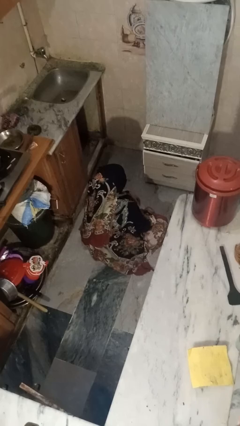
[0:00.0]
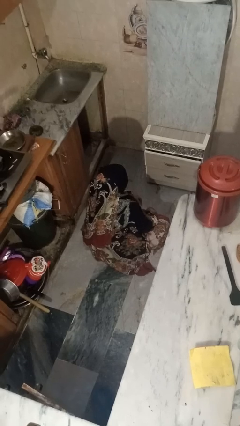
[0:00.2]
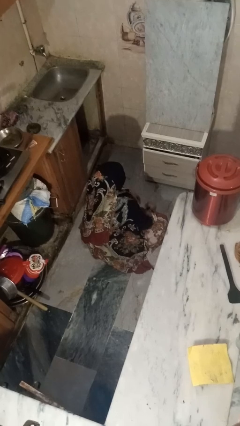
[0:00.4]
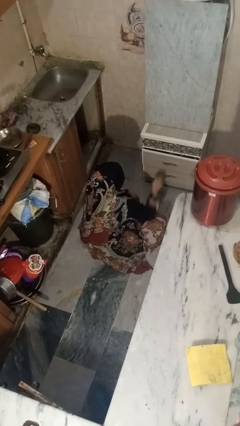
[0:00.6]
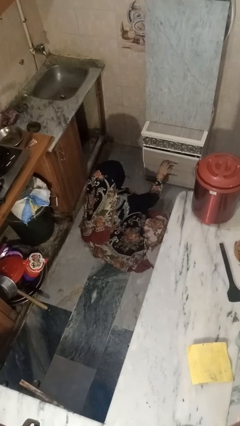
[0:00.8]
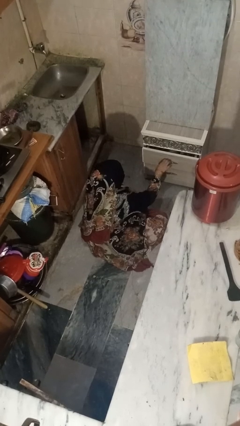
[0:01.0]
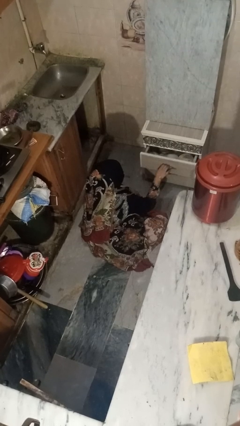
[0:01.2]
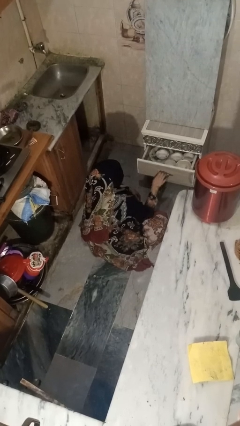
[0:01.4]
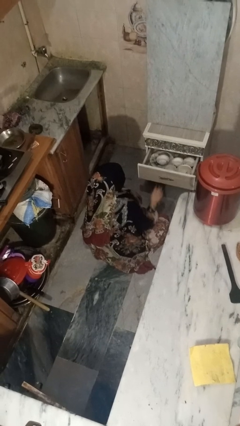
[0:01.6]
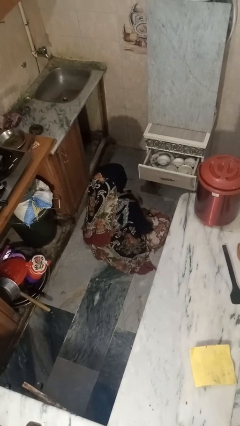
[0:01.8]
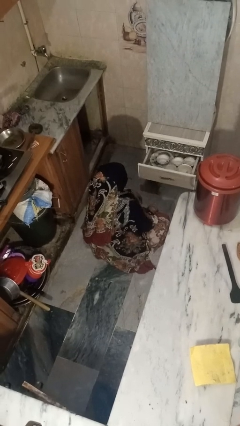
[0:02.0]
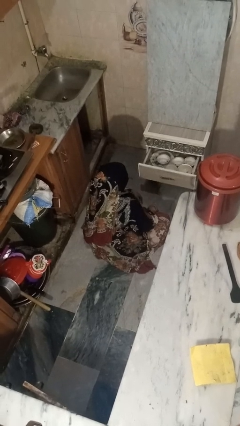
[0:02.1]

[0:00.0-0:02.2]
person opens kitchen drawer

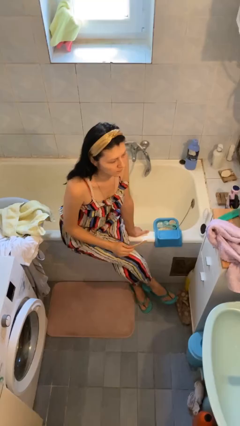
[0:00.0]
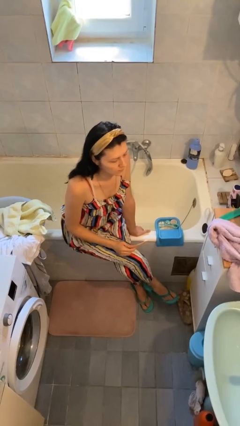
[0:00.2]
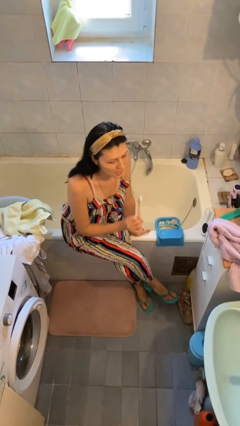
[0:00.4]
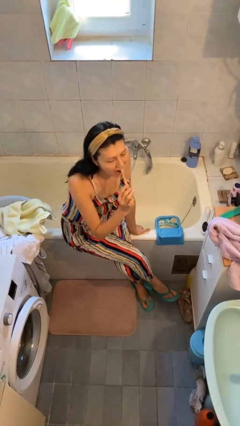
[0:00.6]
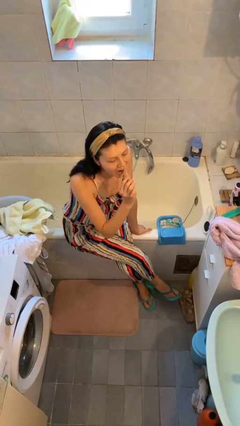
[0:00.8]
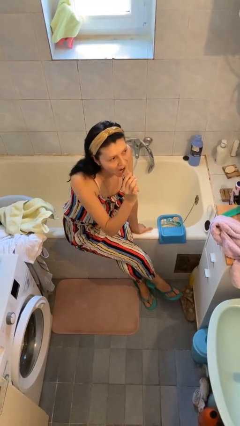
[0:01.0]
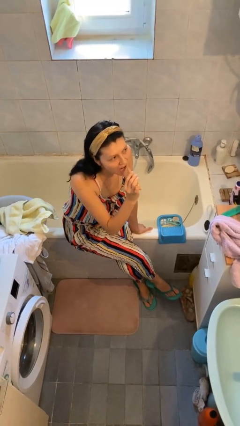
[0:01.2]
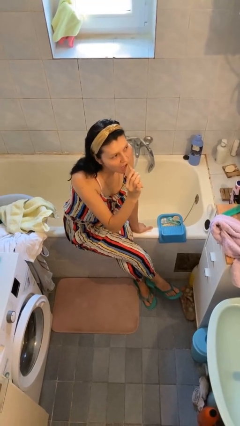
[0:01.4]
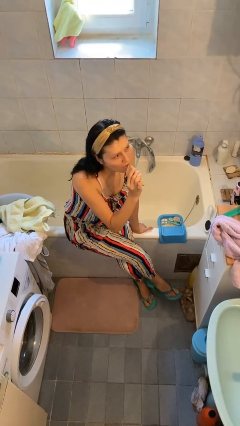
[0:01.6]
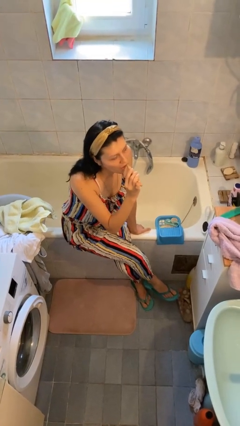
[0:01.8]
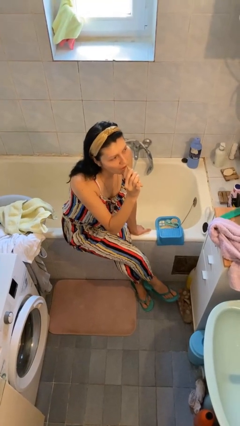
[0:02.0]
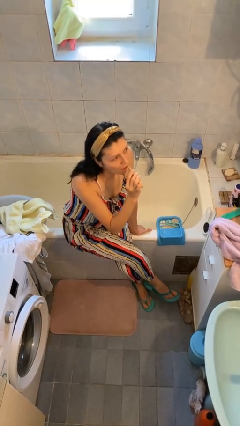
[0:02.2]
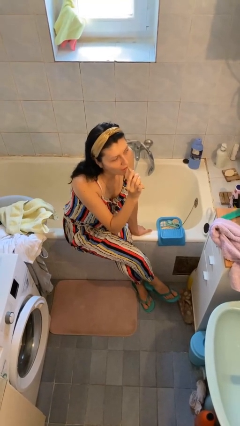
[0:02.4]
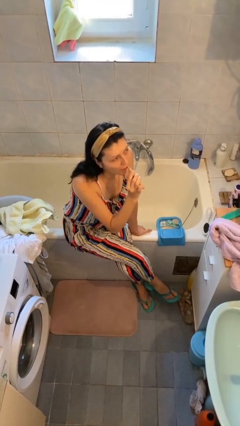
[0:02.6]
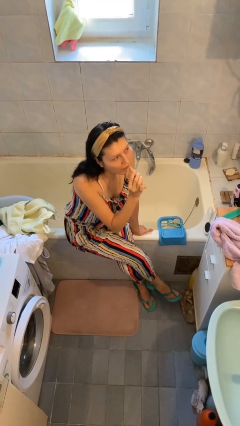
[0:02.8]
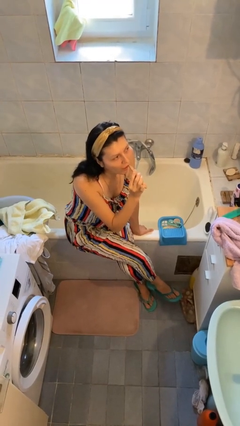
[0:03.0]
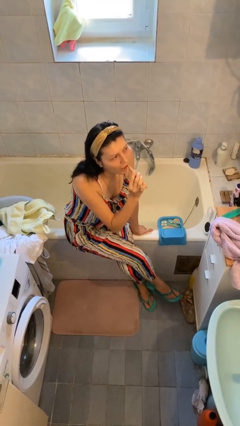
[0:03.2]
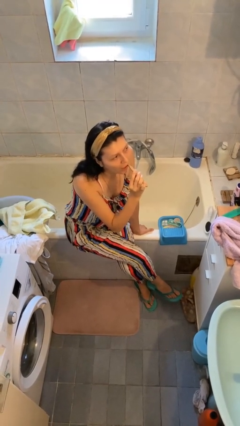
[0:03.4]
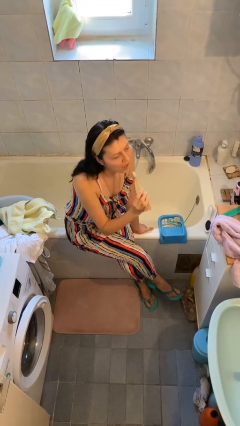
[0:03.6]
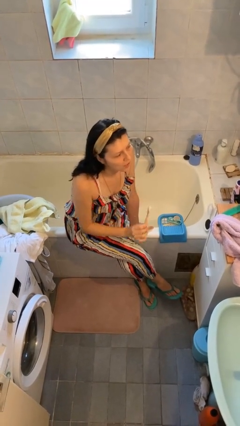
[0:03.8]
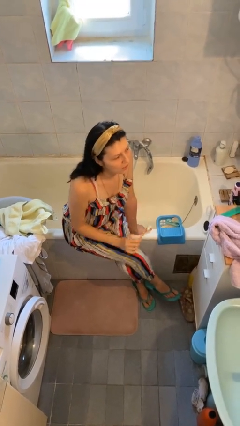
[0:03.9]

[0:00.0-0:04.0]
person brushes teeth

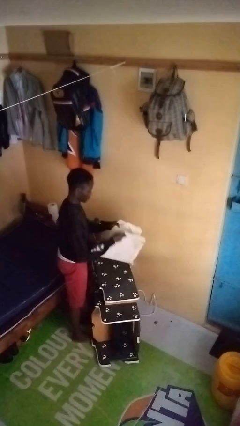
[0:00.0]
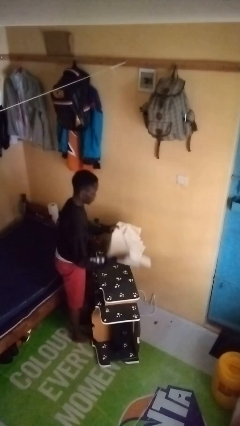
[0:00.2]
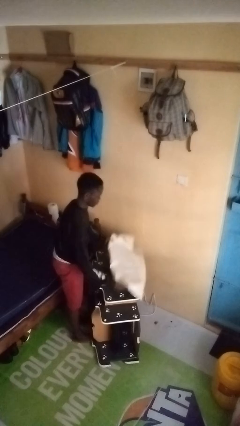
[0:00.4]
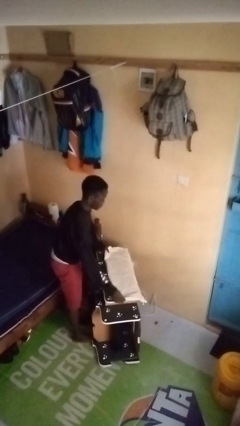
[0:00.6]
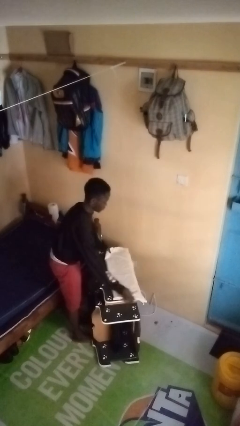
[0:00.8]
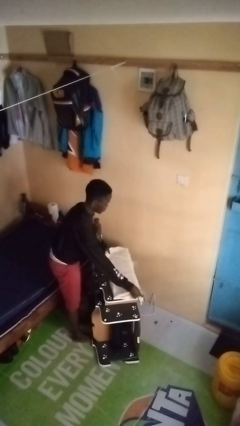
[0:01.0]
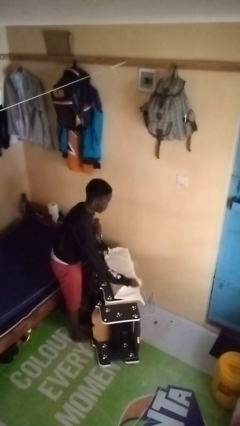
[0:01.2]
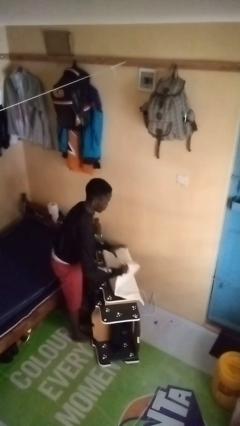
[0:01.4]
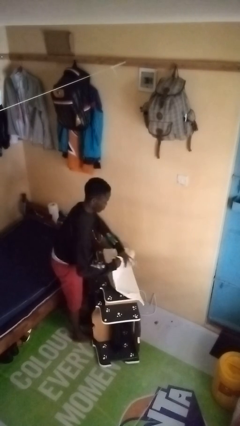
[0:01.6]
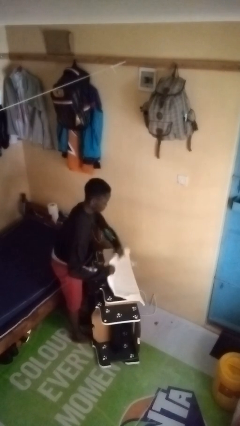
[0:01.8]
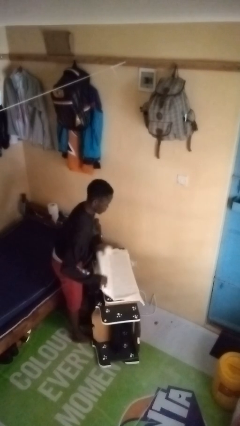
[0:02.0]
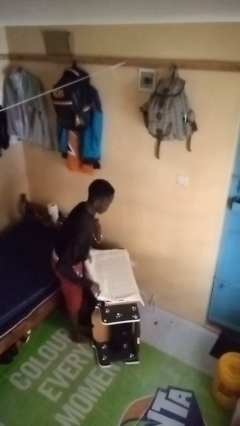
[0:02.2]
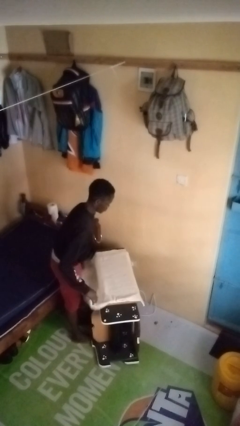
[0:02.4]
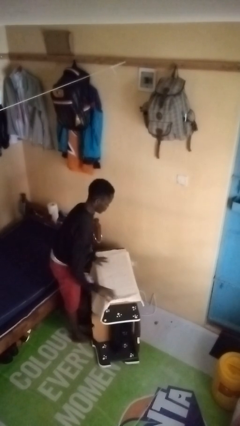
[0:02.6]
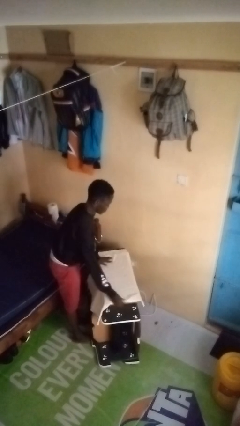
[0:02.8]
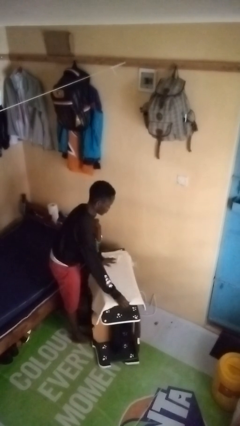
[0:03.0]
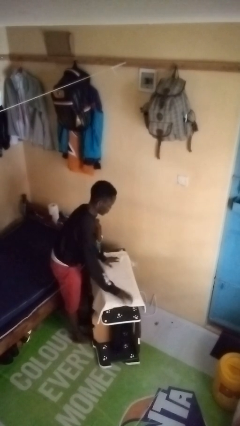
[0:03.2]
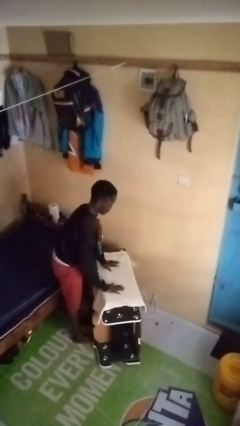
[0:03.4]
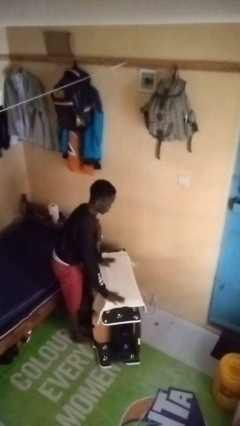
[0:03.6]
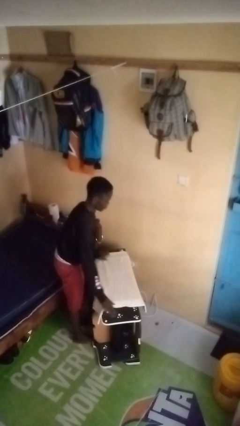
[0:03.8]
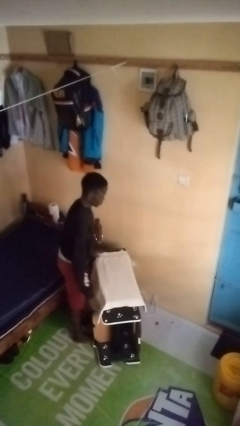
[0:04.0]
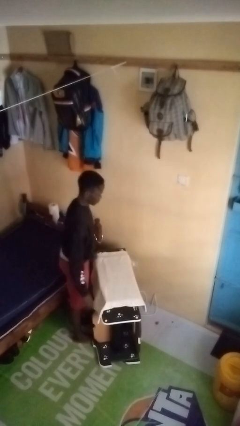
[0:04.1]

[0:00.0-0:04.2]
person spreads tablecloth

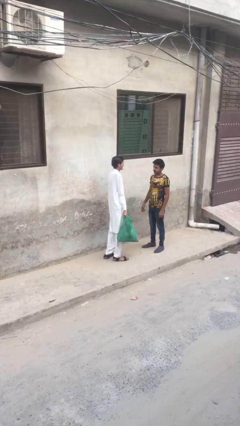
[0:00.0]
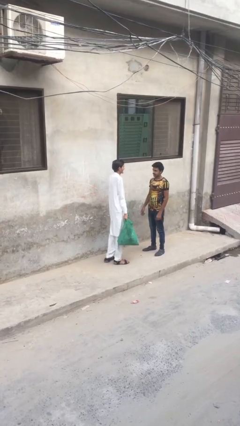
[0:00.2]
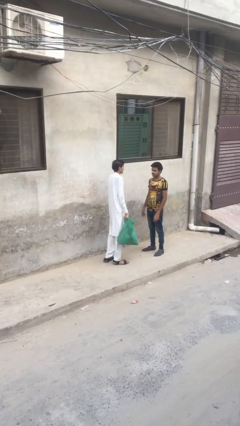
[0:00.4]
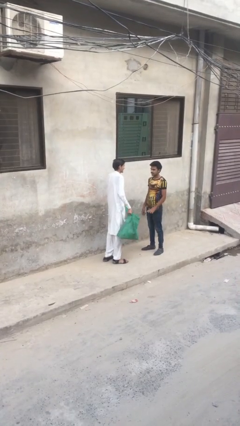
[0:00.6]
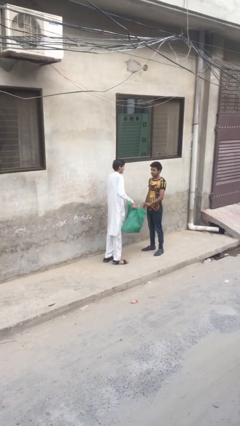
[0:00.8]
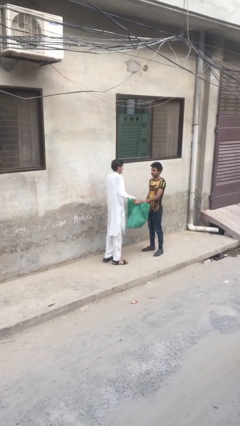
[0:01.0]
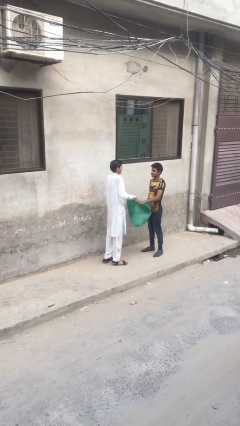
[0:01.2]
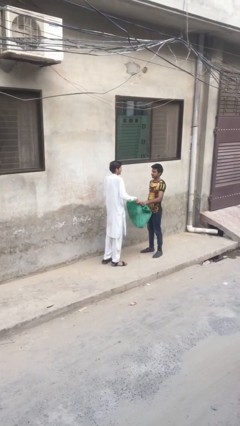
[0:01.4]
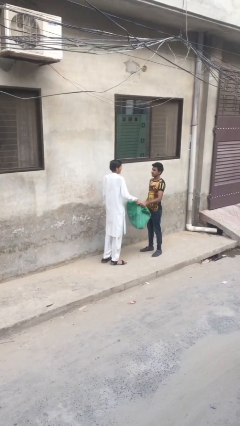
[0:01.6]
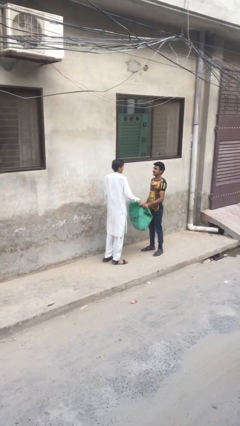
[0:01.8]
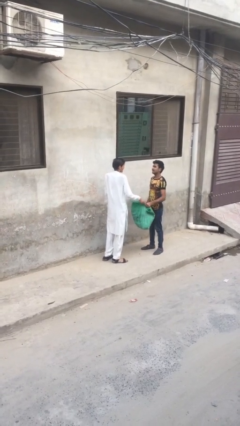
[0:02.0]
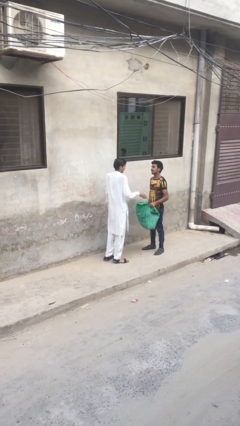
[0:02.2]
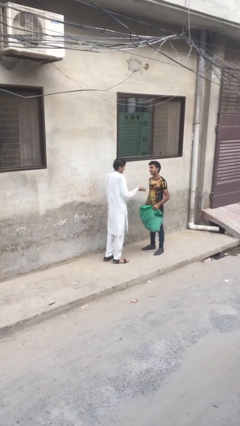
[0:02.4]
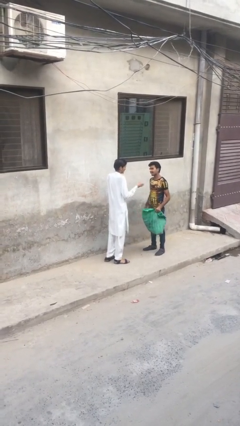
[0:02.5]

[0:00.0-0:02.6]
person transfers object to person

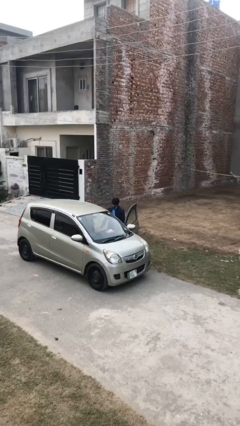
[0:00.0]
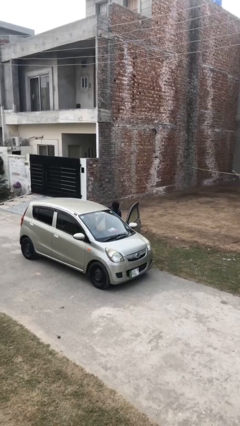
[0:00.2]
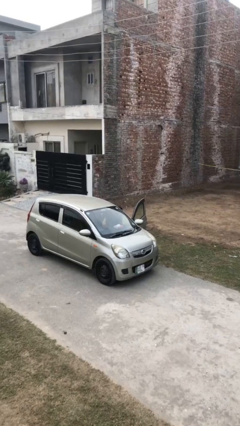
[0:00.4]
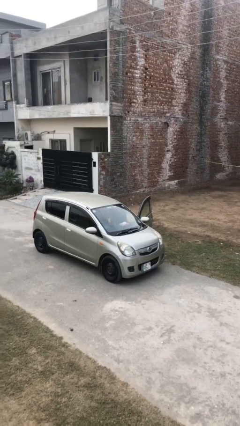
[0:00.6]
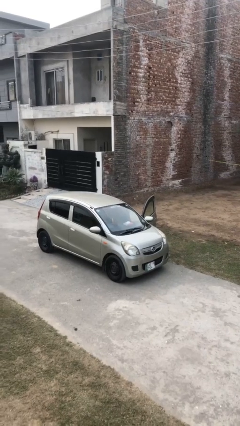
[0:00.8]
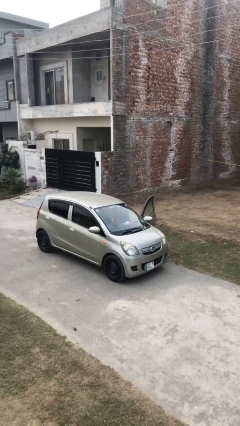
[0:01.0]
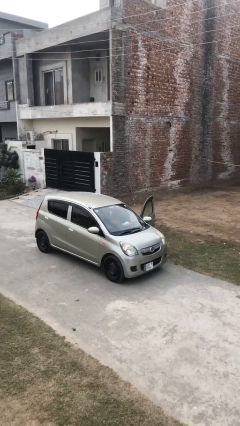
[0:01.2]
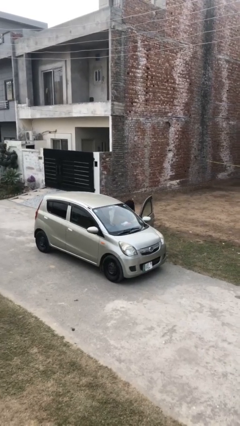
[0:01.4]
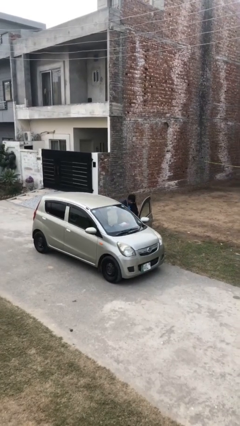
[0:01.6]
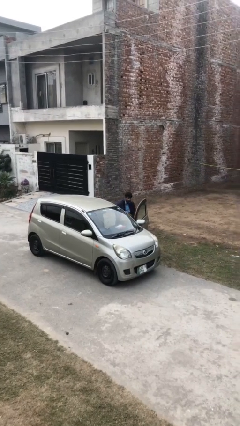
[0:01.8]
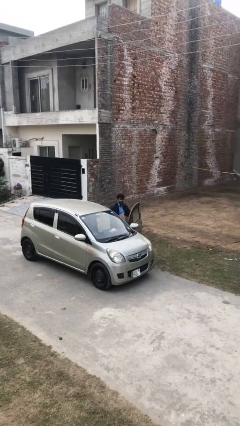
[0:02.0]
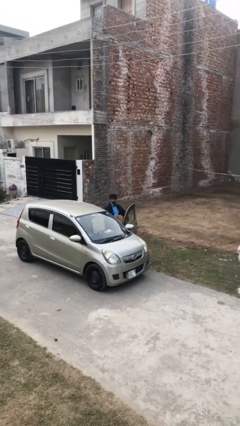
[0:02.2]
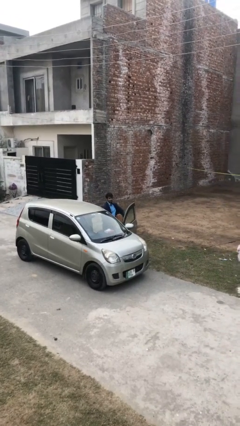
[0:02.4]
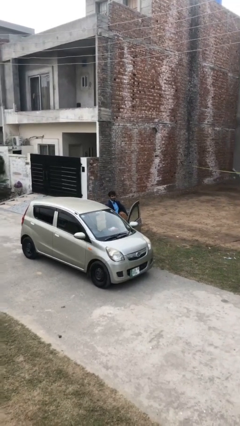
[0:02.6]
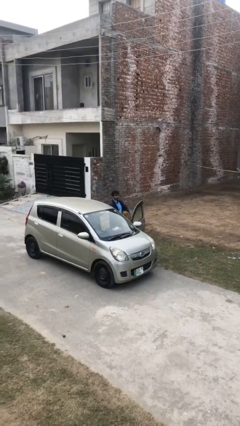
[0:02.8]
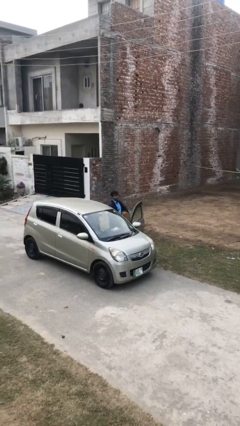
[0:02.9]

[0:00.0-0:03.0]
person unloads car

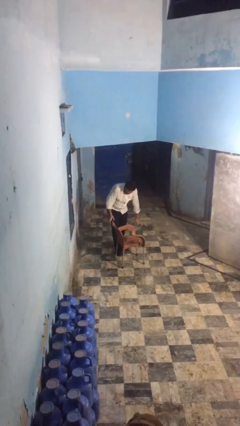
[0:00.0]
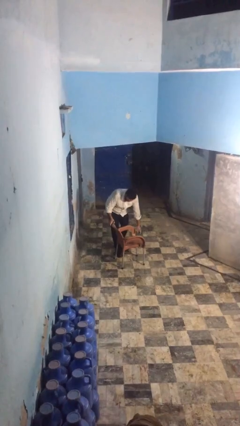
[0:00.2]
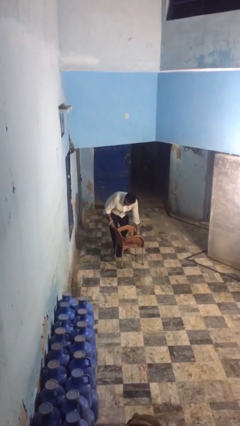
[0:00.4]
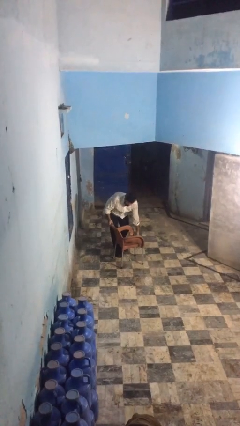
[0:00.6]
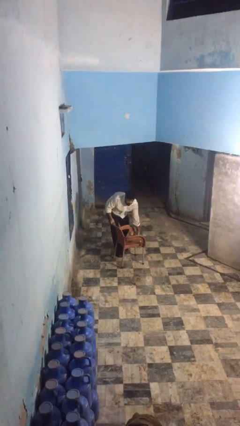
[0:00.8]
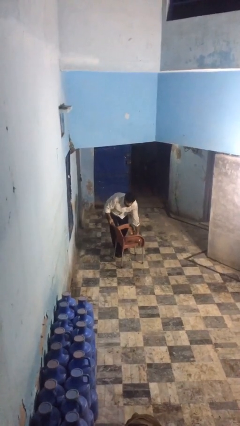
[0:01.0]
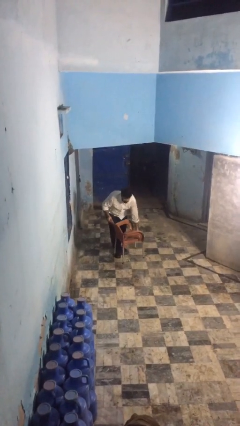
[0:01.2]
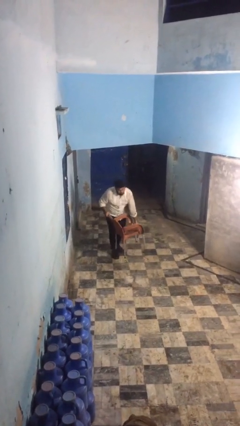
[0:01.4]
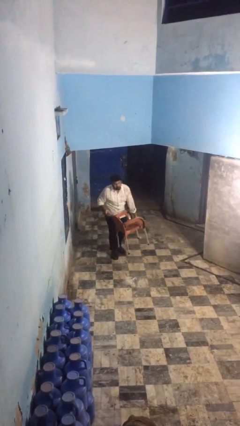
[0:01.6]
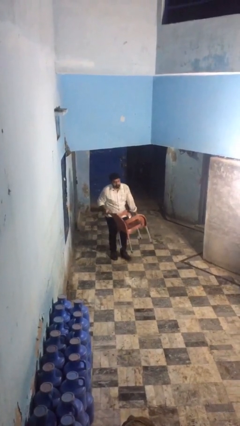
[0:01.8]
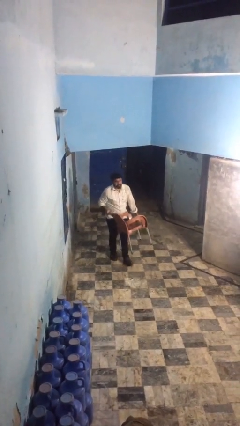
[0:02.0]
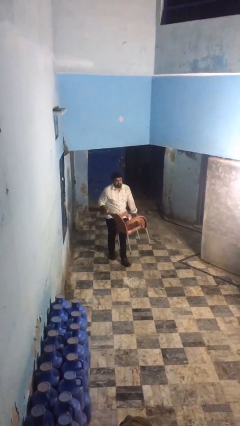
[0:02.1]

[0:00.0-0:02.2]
person picks up object from floor
